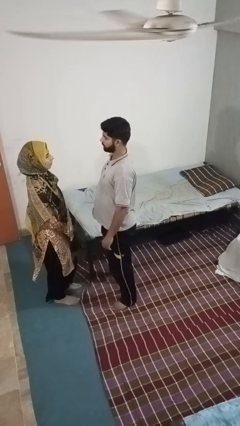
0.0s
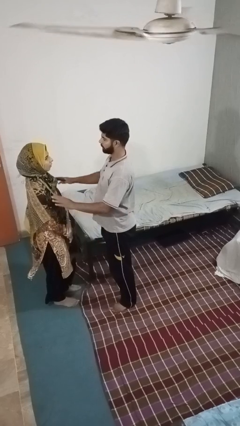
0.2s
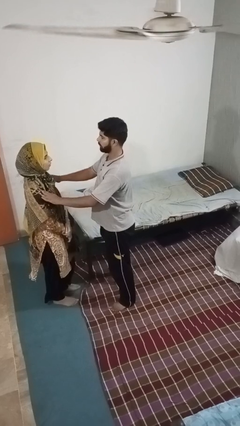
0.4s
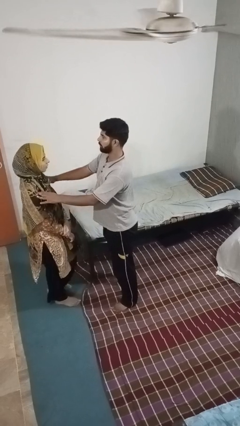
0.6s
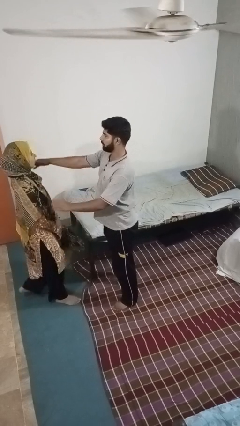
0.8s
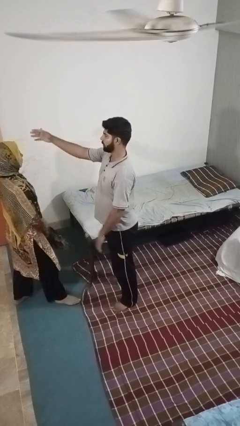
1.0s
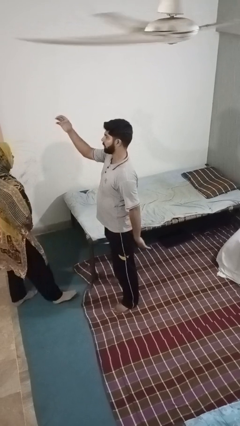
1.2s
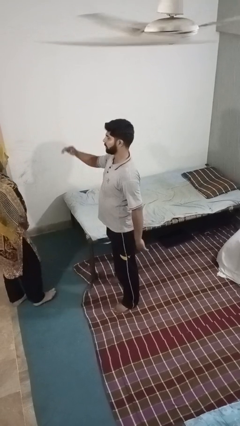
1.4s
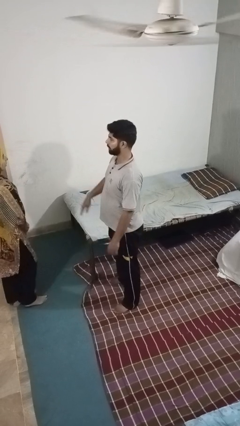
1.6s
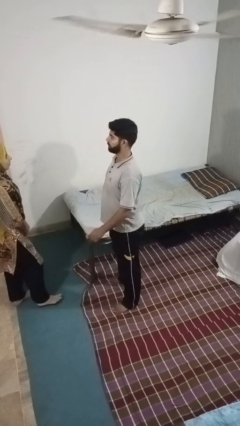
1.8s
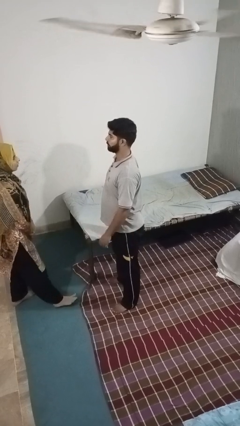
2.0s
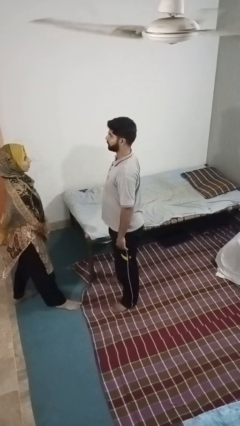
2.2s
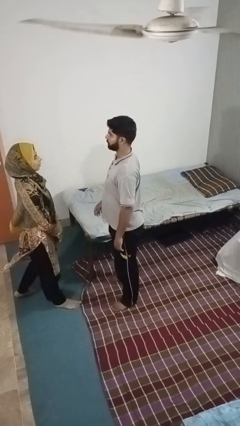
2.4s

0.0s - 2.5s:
person shoves person

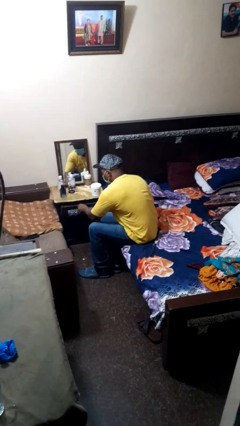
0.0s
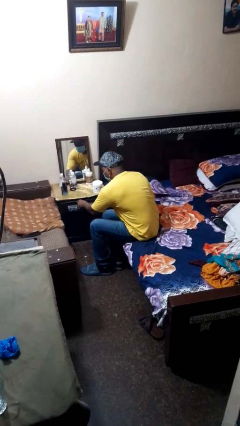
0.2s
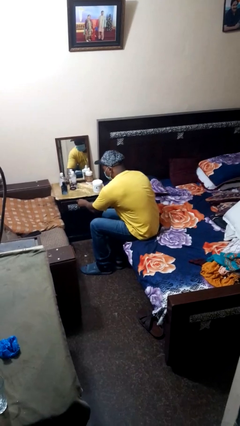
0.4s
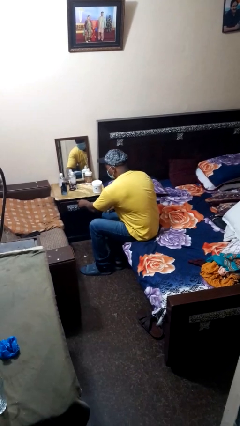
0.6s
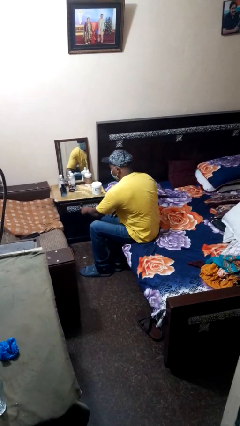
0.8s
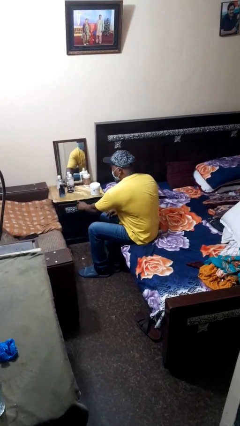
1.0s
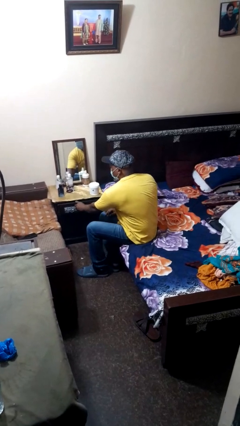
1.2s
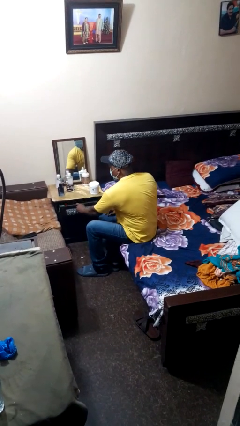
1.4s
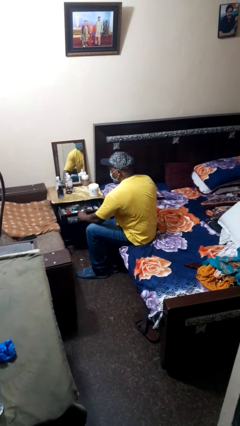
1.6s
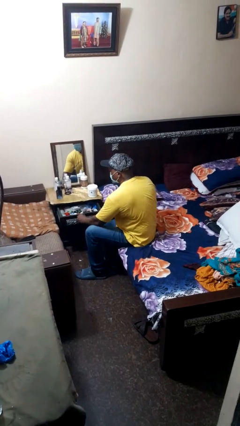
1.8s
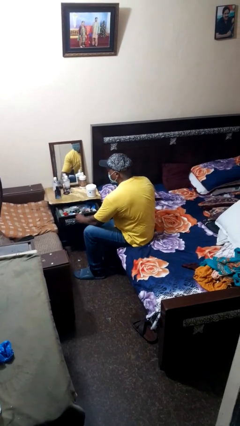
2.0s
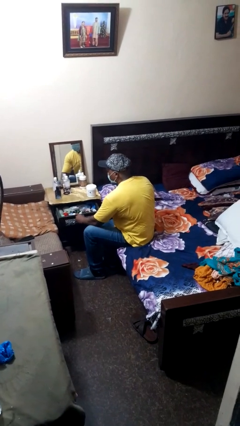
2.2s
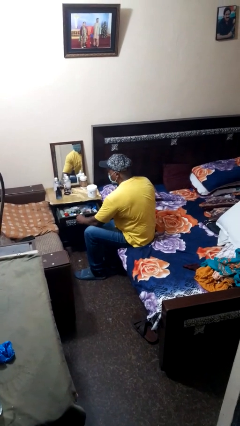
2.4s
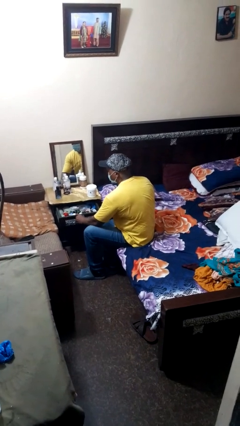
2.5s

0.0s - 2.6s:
person opens dresser drawer

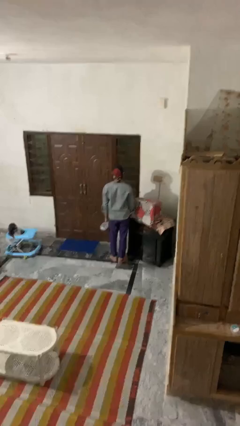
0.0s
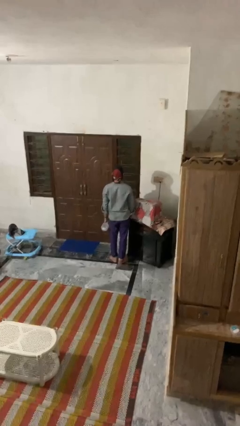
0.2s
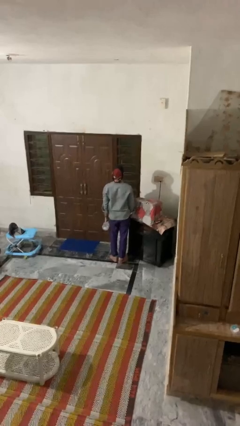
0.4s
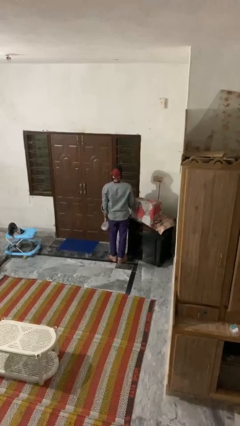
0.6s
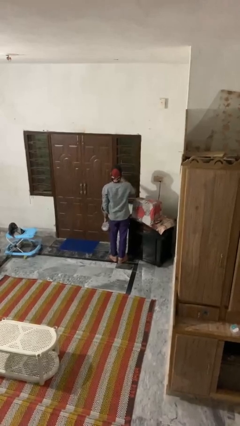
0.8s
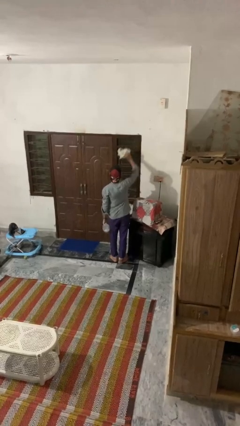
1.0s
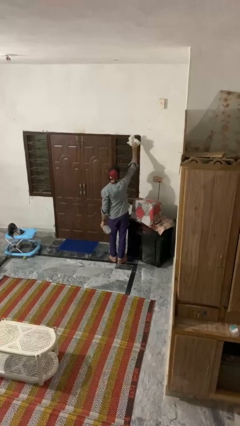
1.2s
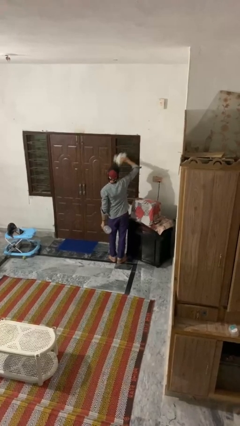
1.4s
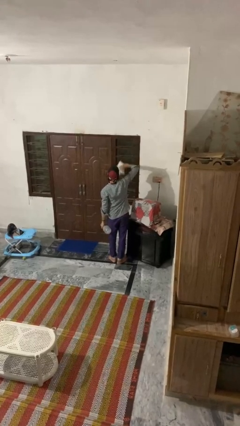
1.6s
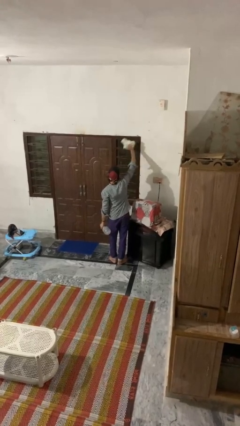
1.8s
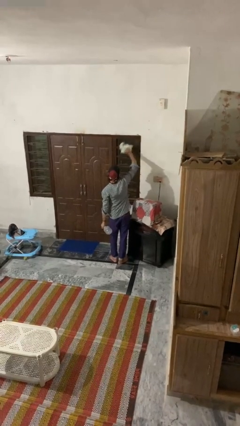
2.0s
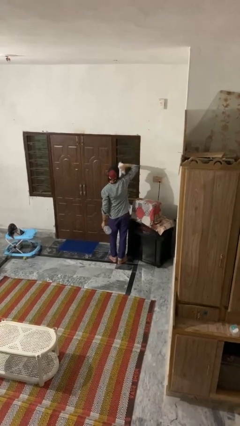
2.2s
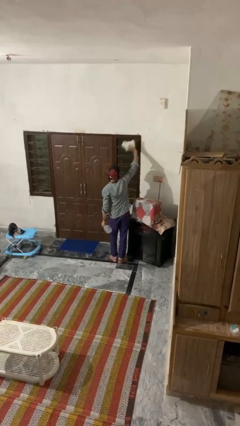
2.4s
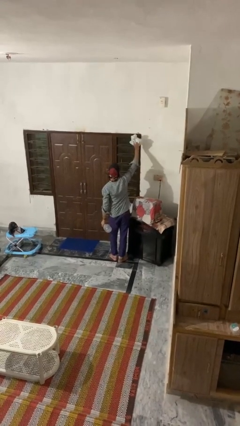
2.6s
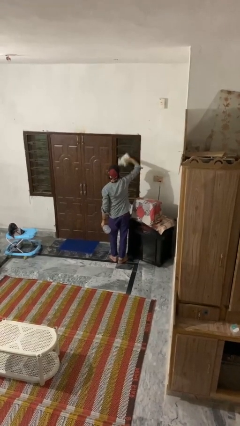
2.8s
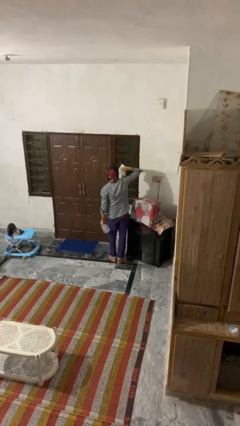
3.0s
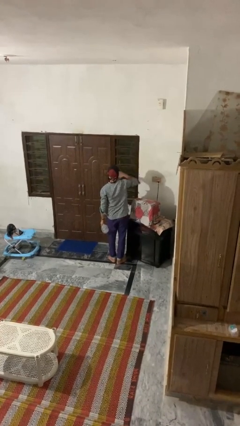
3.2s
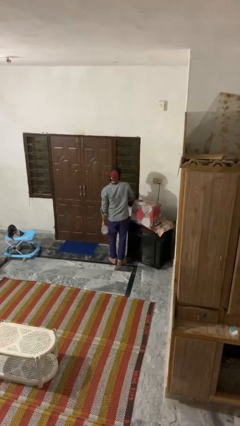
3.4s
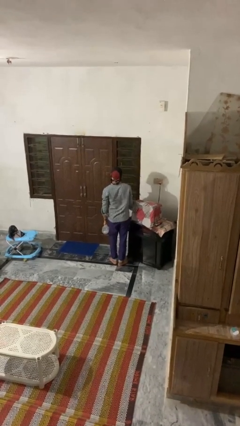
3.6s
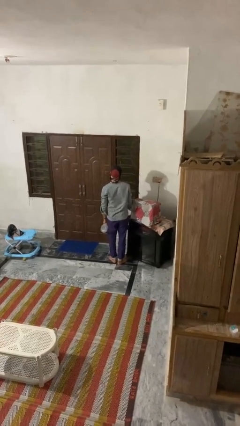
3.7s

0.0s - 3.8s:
person washes window

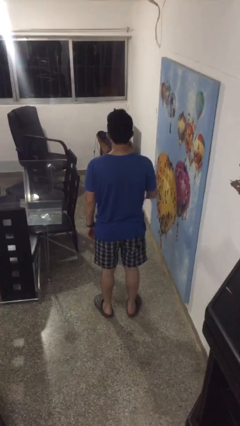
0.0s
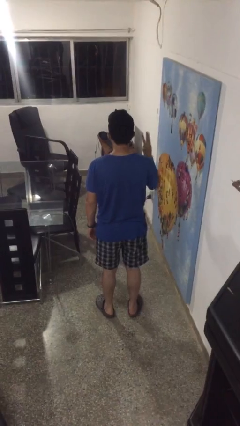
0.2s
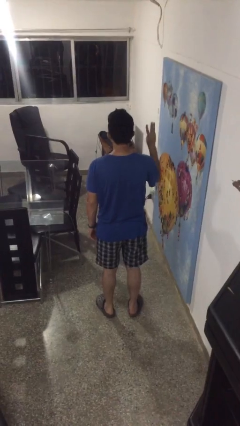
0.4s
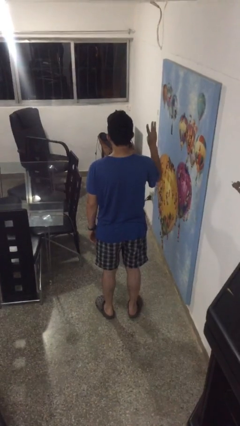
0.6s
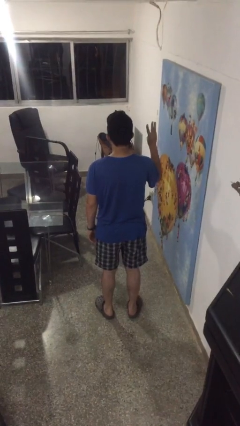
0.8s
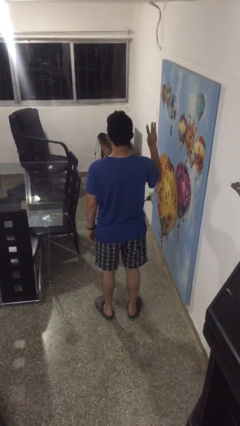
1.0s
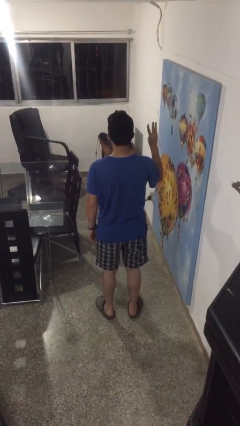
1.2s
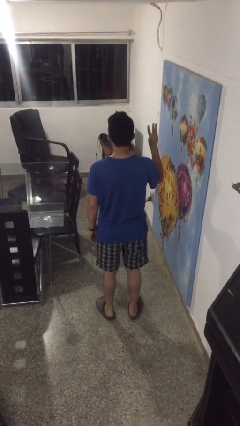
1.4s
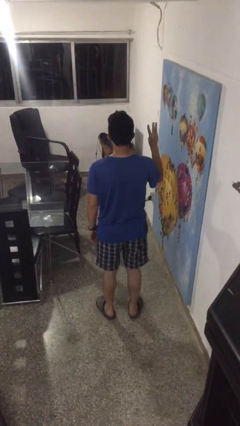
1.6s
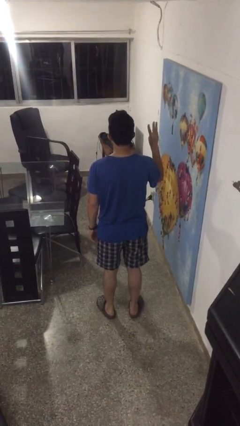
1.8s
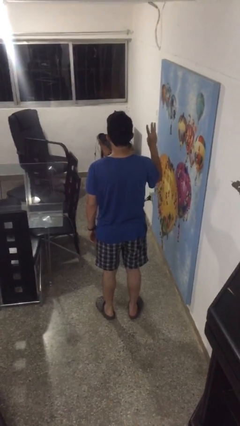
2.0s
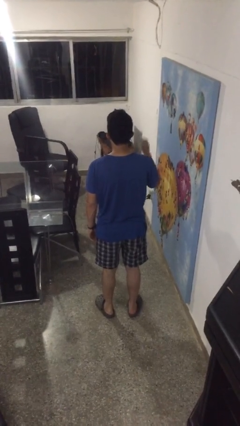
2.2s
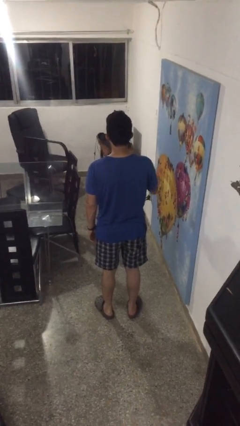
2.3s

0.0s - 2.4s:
person gestures number three

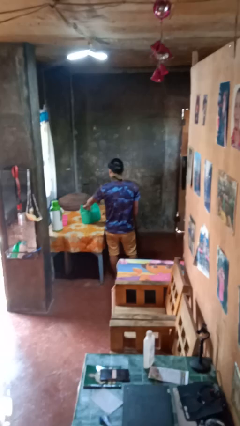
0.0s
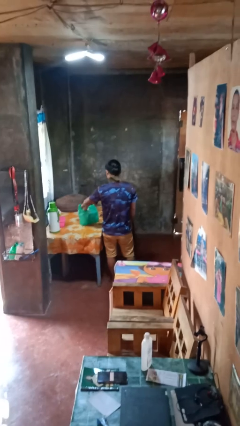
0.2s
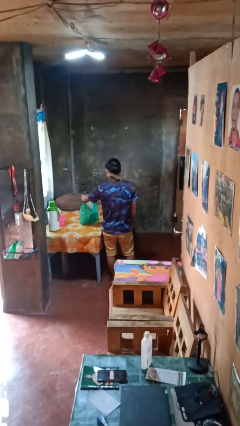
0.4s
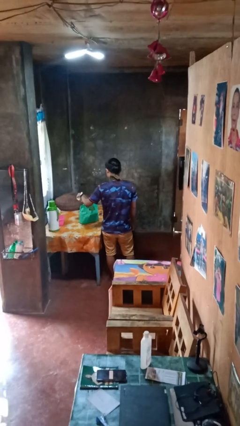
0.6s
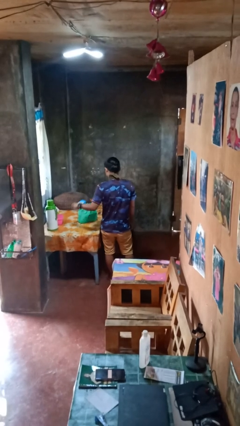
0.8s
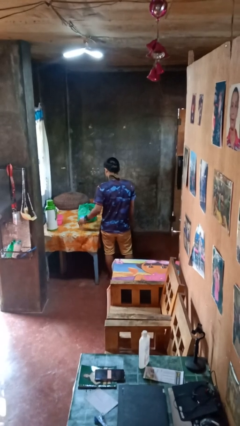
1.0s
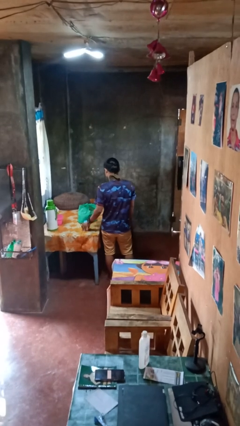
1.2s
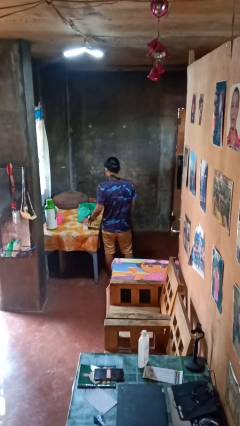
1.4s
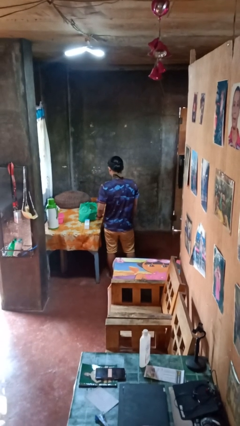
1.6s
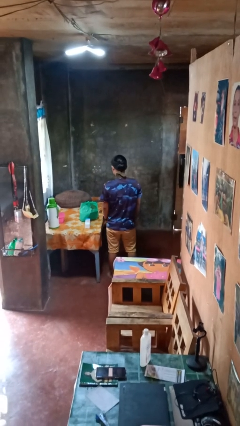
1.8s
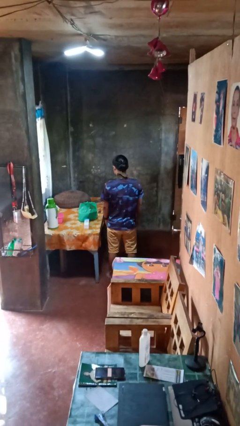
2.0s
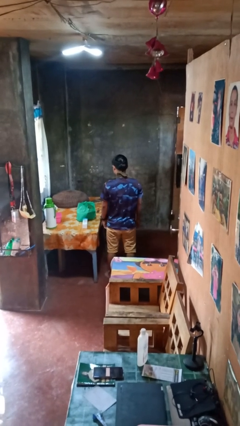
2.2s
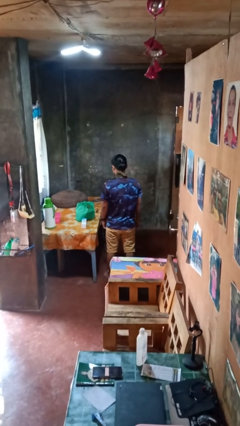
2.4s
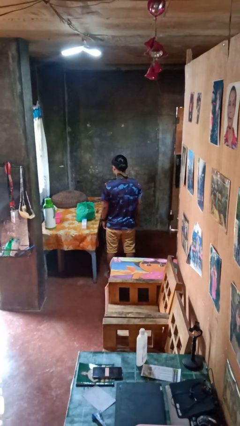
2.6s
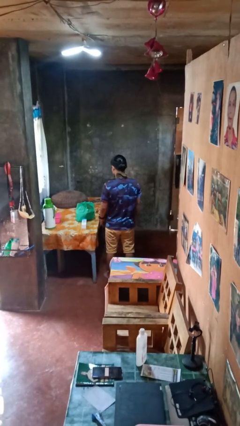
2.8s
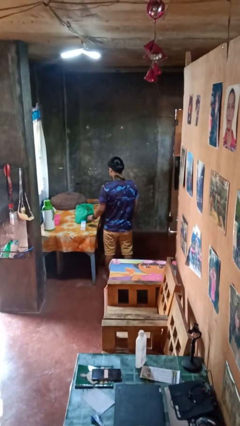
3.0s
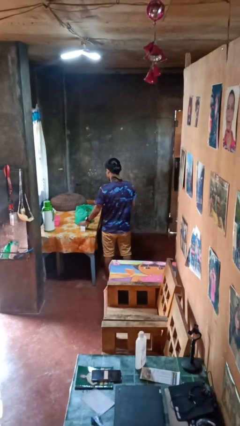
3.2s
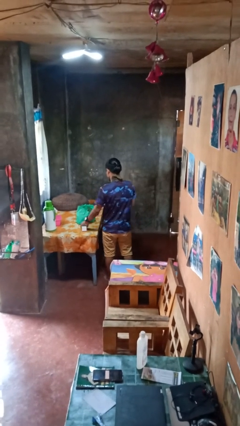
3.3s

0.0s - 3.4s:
person takes object from bag

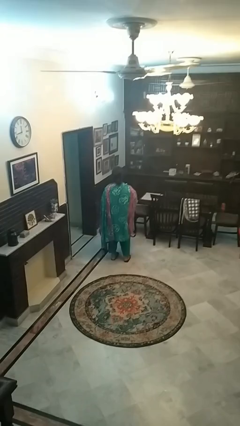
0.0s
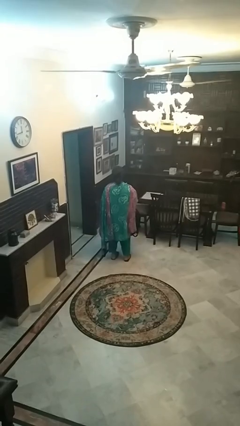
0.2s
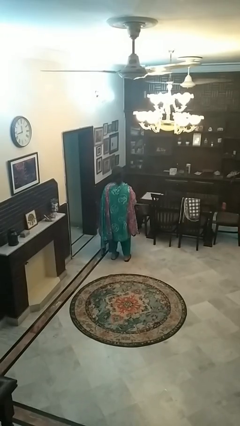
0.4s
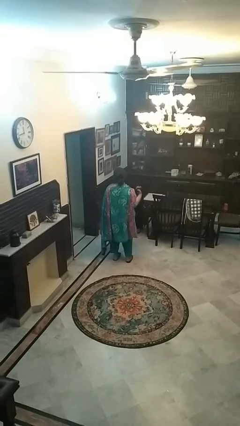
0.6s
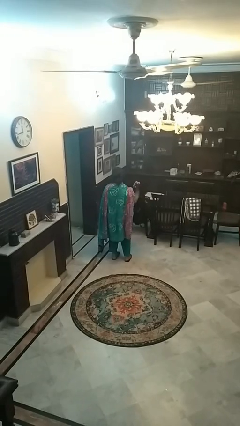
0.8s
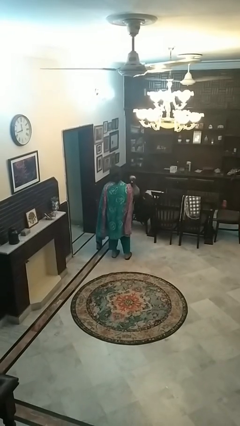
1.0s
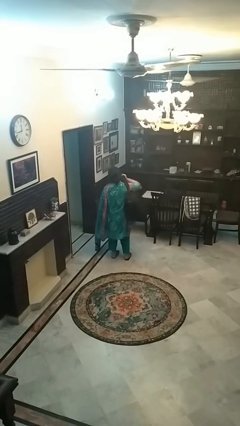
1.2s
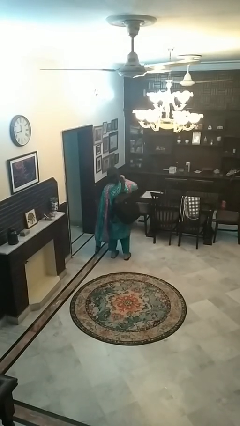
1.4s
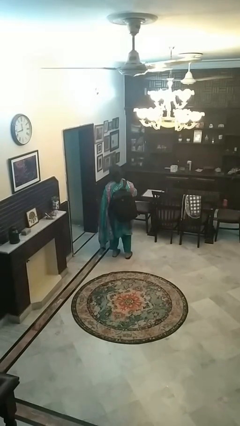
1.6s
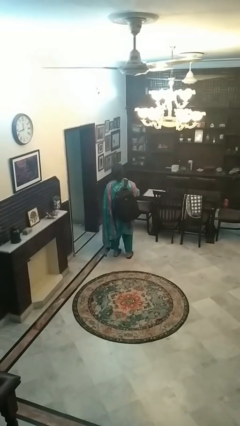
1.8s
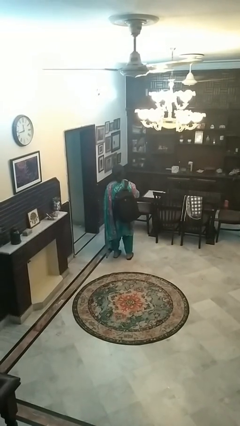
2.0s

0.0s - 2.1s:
person puts on backpack

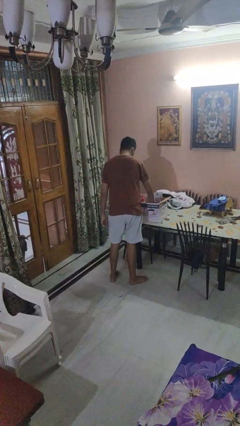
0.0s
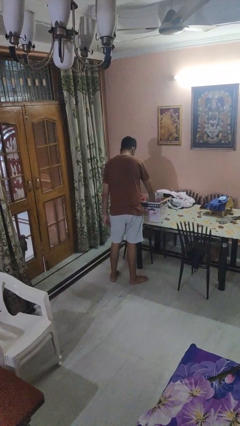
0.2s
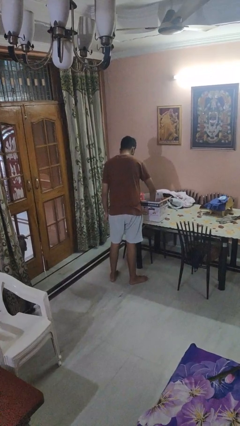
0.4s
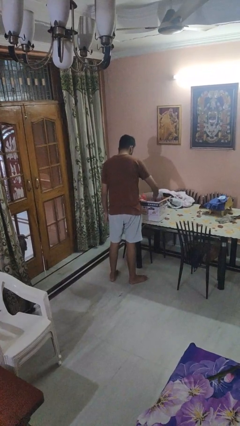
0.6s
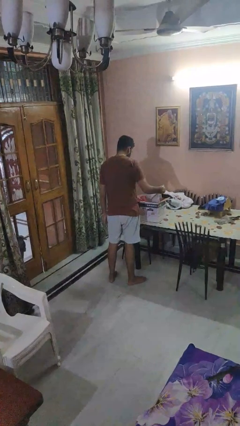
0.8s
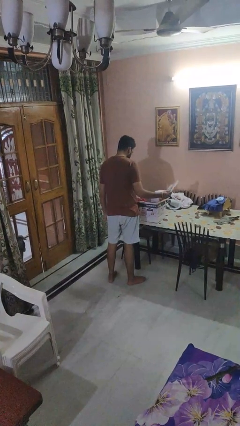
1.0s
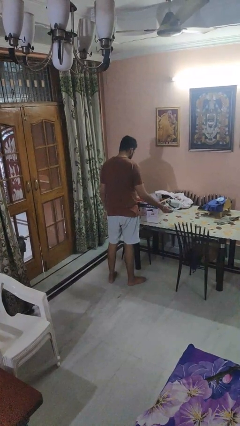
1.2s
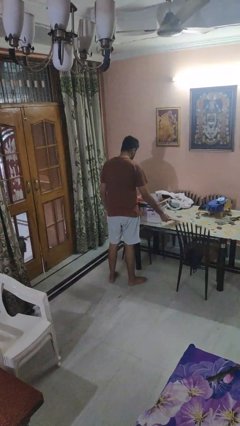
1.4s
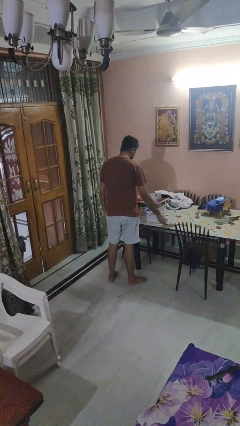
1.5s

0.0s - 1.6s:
person takes object from box
